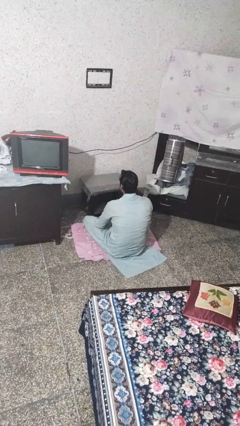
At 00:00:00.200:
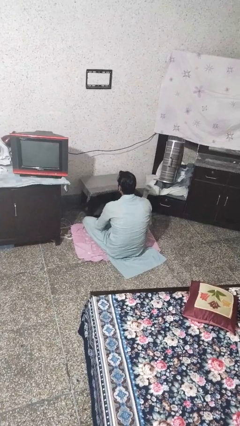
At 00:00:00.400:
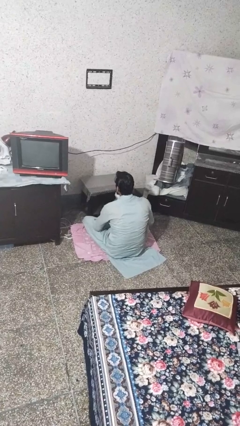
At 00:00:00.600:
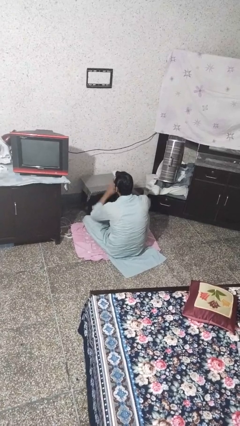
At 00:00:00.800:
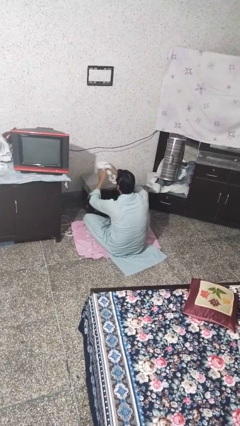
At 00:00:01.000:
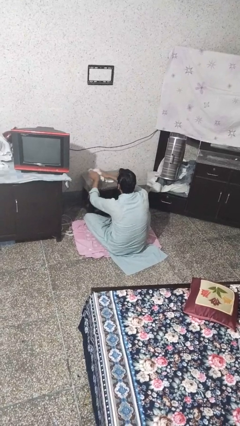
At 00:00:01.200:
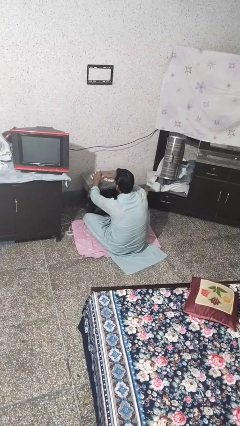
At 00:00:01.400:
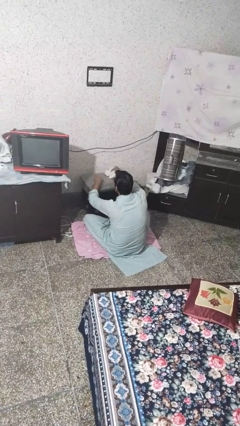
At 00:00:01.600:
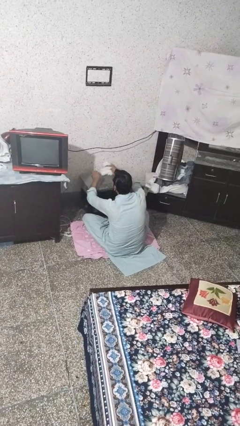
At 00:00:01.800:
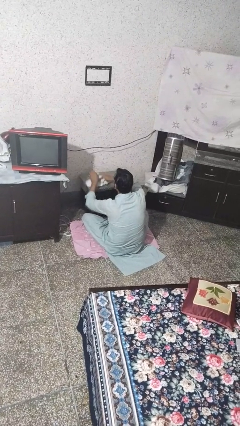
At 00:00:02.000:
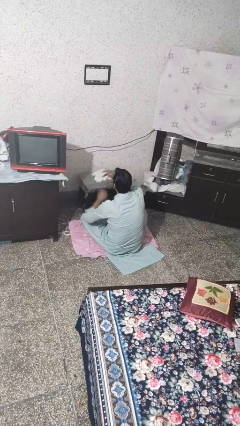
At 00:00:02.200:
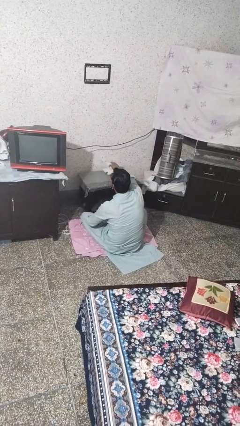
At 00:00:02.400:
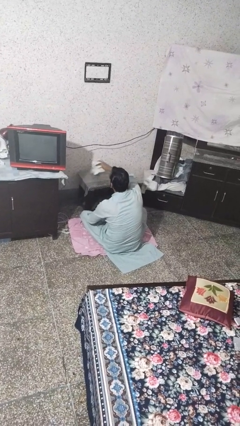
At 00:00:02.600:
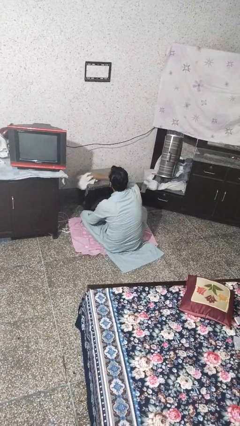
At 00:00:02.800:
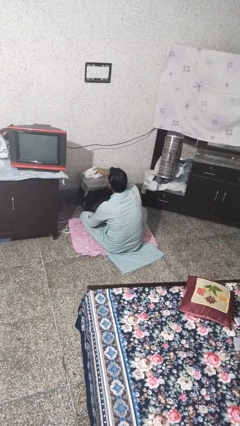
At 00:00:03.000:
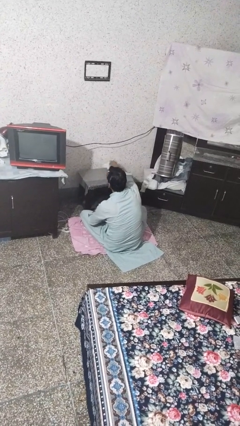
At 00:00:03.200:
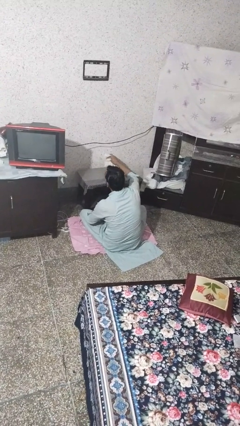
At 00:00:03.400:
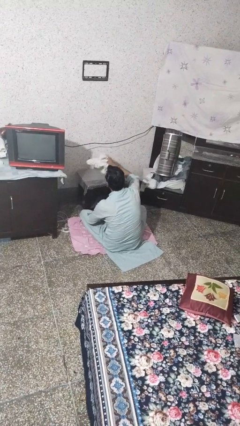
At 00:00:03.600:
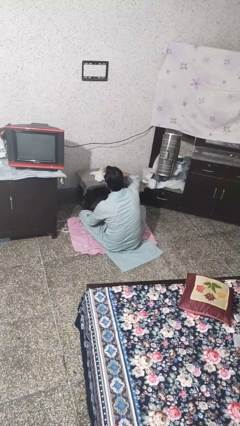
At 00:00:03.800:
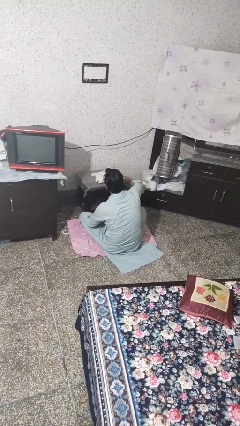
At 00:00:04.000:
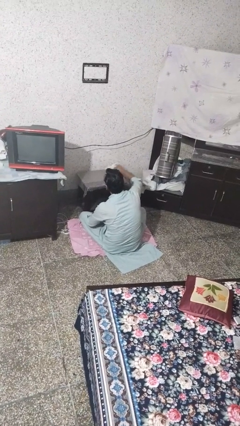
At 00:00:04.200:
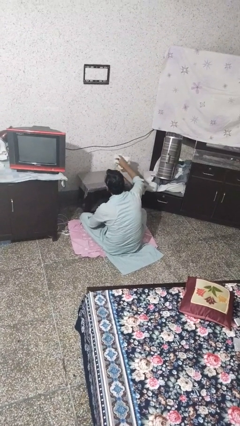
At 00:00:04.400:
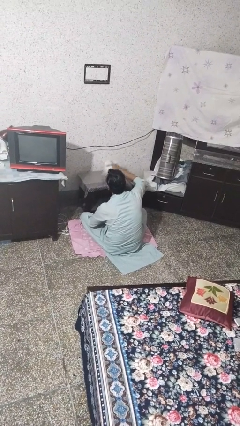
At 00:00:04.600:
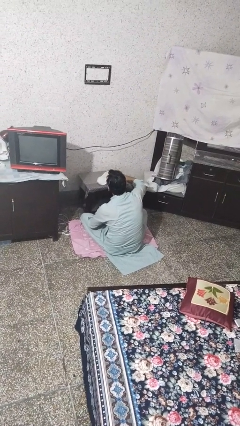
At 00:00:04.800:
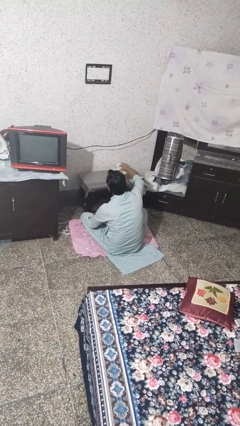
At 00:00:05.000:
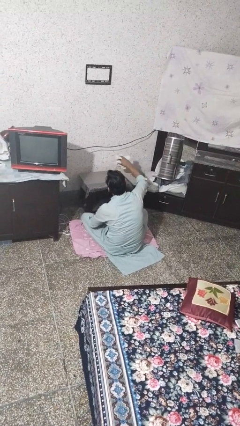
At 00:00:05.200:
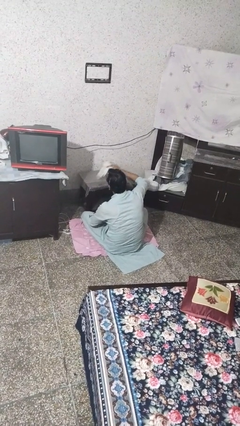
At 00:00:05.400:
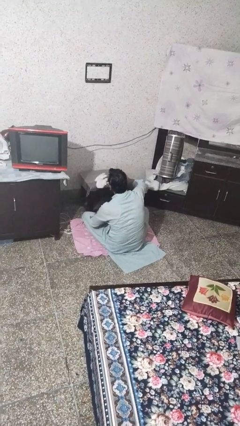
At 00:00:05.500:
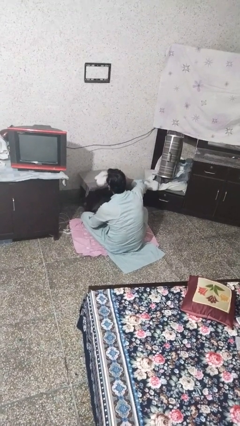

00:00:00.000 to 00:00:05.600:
person cleans table with rag

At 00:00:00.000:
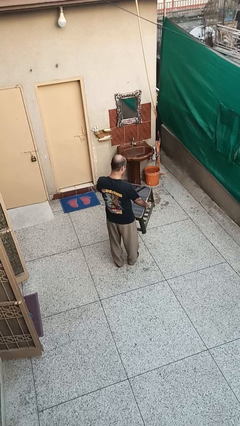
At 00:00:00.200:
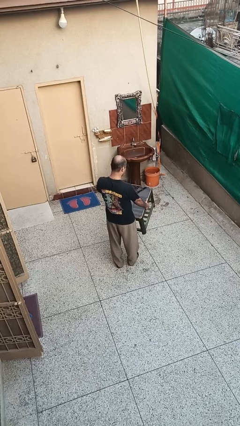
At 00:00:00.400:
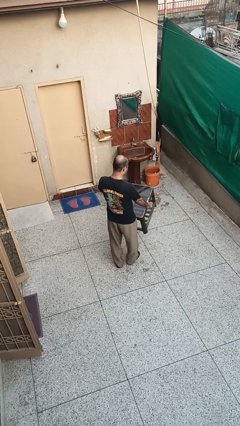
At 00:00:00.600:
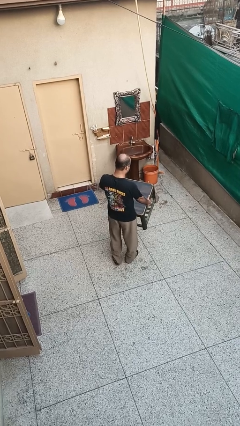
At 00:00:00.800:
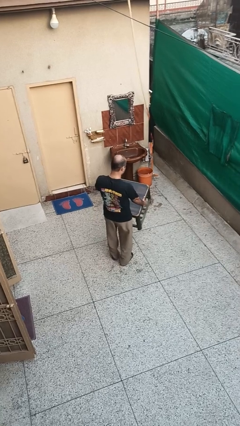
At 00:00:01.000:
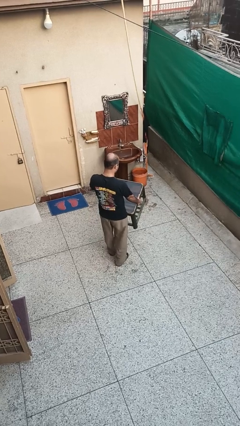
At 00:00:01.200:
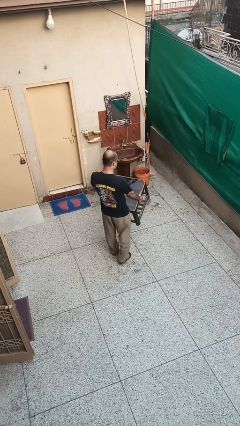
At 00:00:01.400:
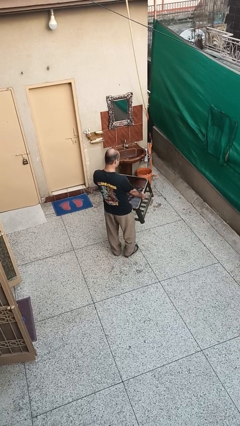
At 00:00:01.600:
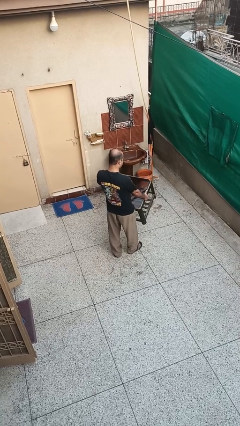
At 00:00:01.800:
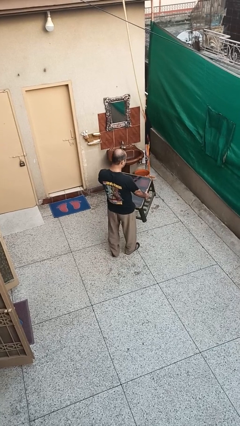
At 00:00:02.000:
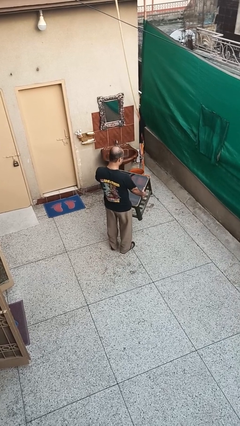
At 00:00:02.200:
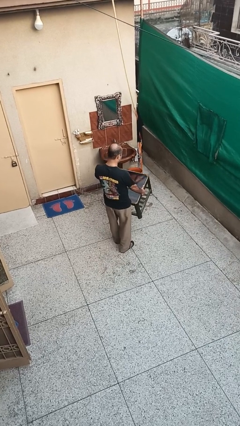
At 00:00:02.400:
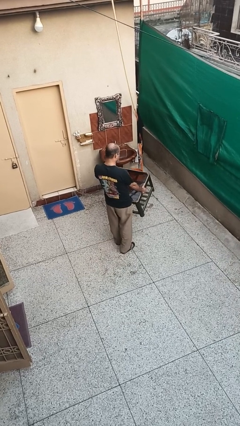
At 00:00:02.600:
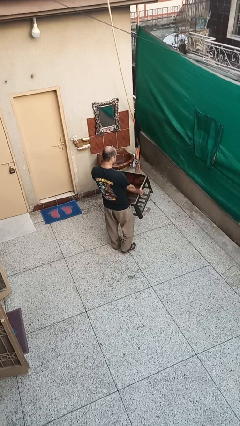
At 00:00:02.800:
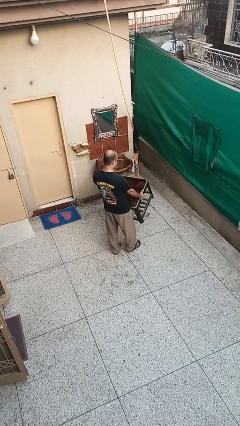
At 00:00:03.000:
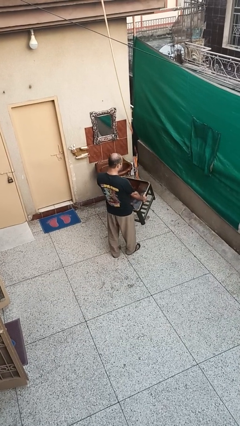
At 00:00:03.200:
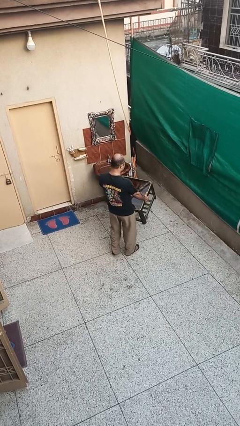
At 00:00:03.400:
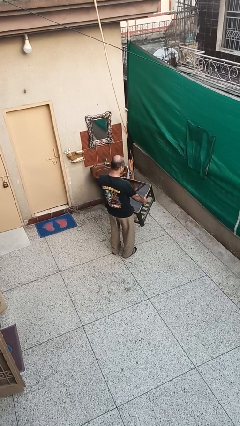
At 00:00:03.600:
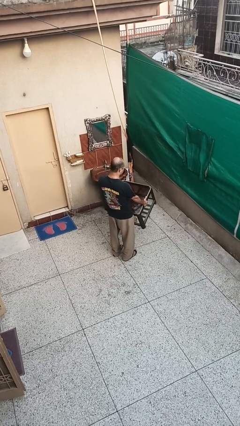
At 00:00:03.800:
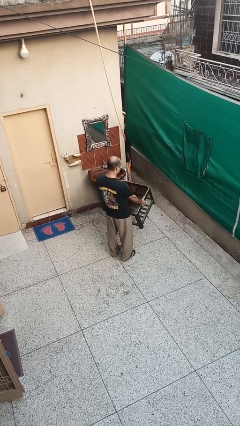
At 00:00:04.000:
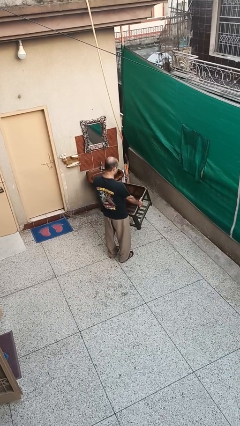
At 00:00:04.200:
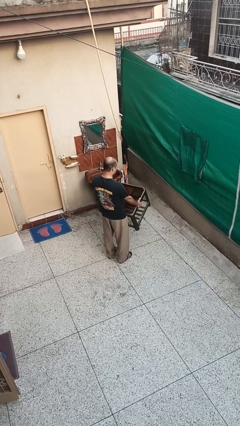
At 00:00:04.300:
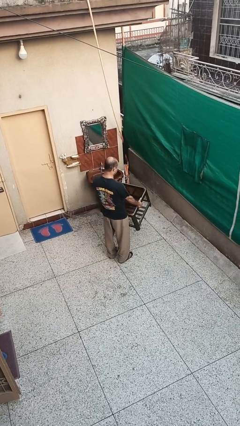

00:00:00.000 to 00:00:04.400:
person carries furniture

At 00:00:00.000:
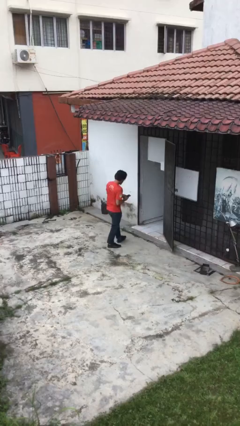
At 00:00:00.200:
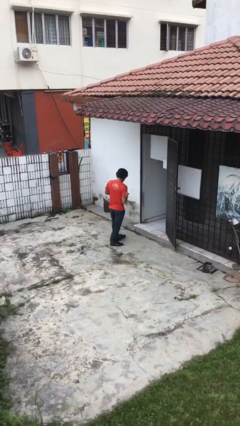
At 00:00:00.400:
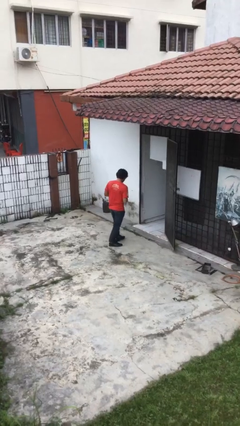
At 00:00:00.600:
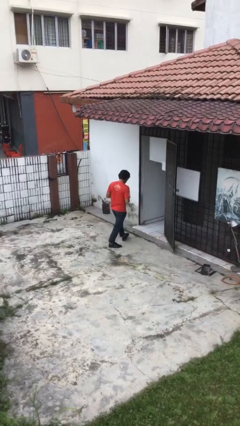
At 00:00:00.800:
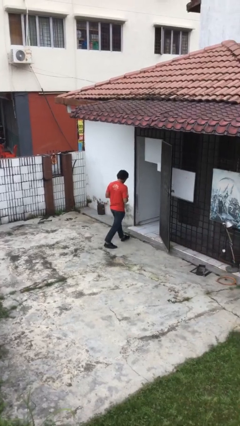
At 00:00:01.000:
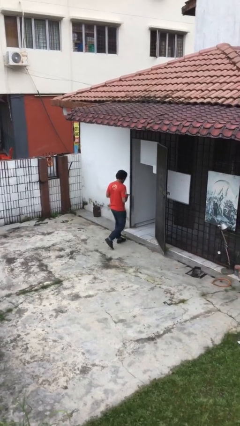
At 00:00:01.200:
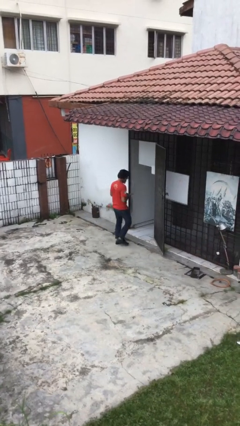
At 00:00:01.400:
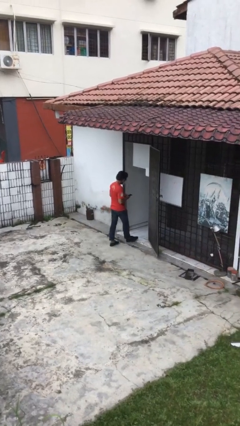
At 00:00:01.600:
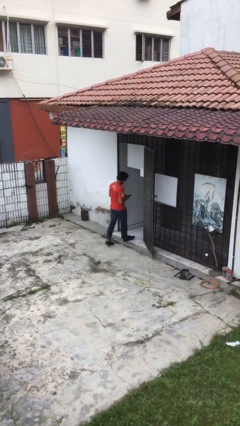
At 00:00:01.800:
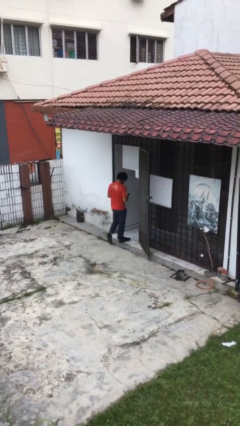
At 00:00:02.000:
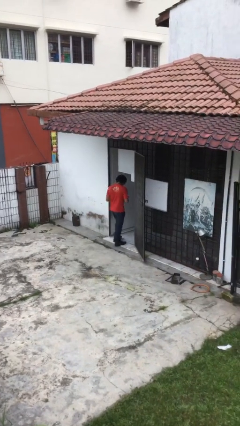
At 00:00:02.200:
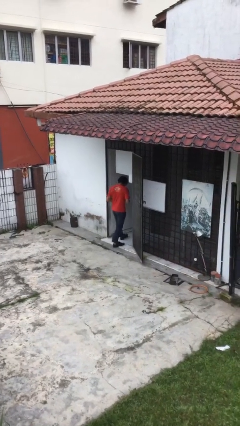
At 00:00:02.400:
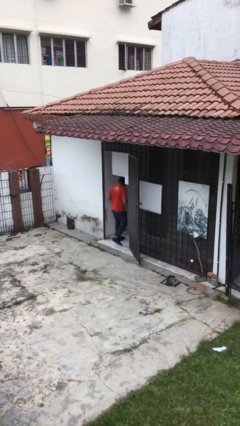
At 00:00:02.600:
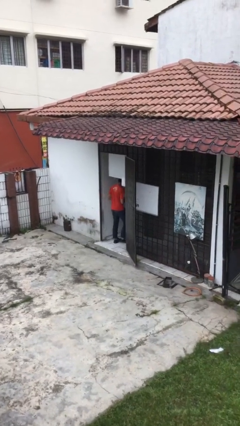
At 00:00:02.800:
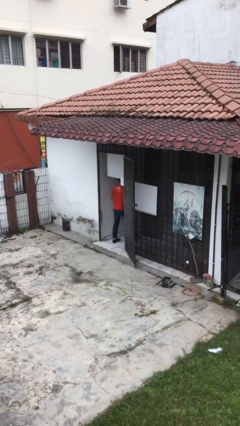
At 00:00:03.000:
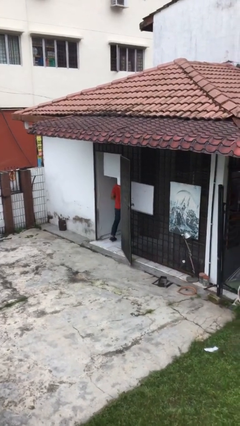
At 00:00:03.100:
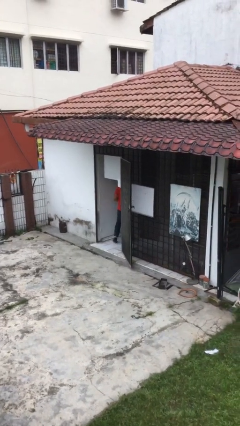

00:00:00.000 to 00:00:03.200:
person exits scene through structure

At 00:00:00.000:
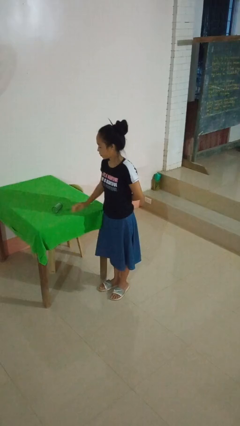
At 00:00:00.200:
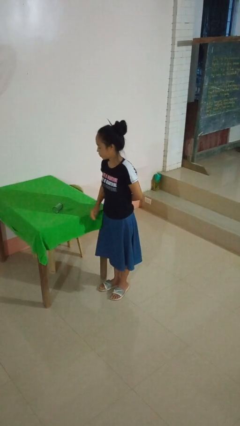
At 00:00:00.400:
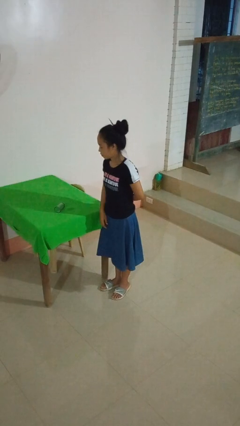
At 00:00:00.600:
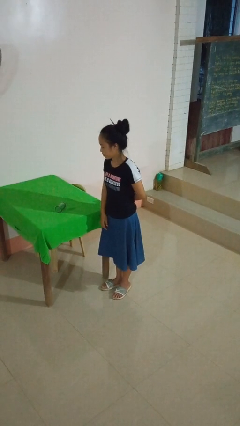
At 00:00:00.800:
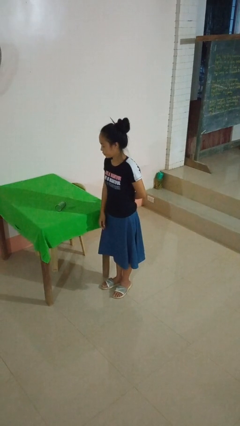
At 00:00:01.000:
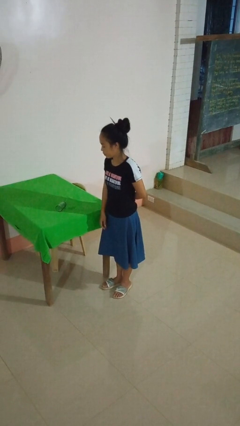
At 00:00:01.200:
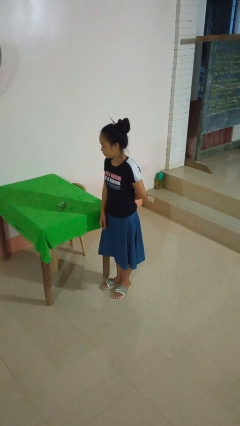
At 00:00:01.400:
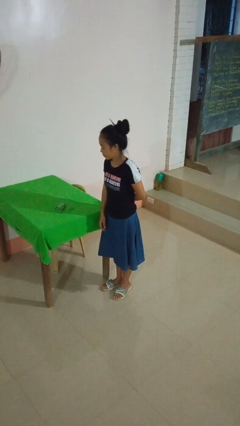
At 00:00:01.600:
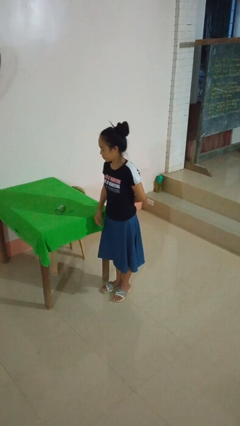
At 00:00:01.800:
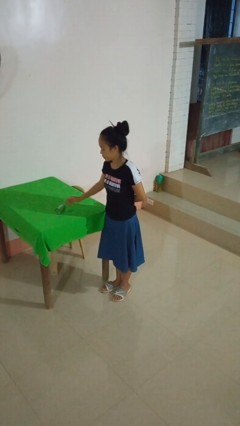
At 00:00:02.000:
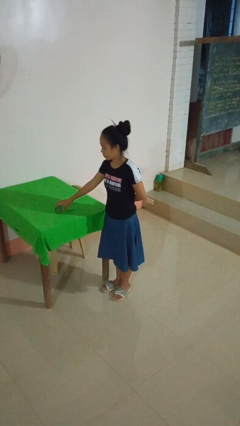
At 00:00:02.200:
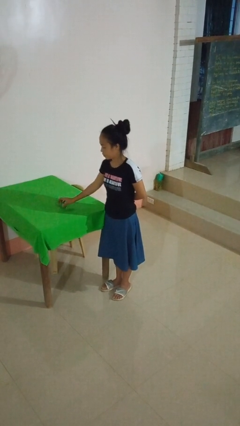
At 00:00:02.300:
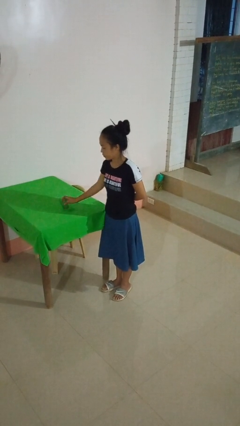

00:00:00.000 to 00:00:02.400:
person knocks over glass

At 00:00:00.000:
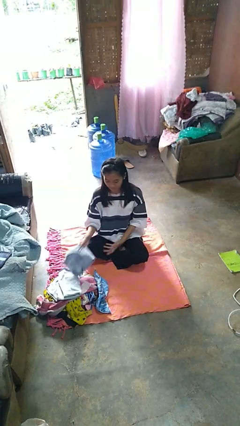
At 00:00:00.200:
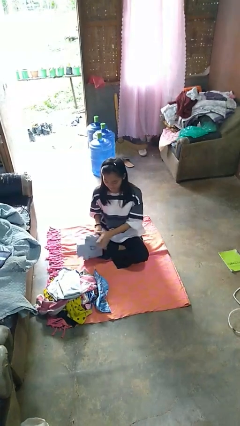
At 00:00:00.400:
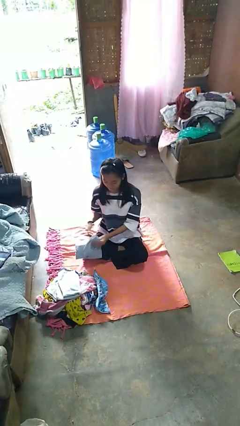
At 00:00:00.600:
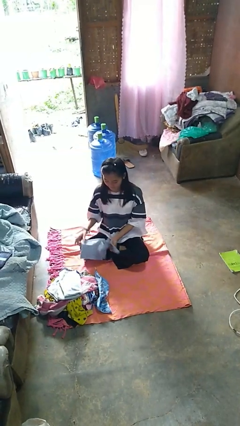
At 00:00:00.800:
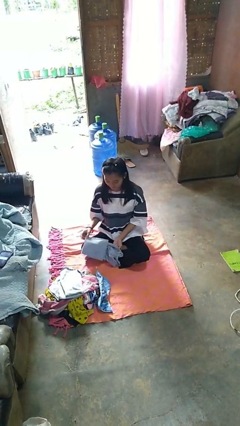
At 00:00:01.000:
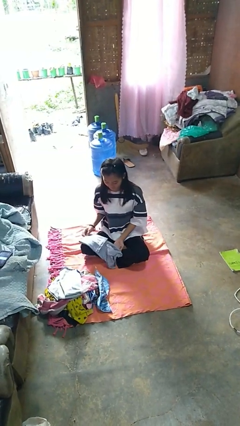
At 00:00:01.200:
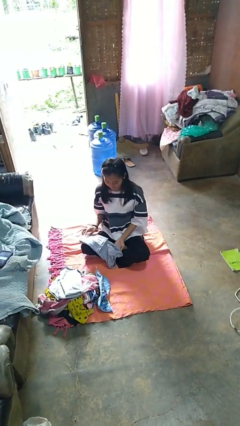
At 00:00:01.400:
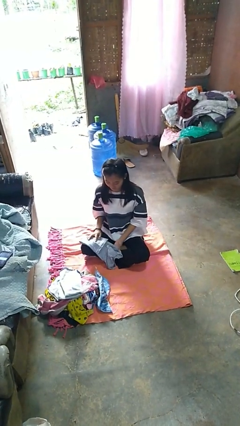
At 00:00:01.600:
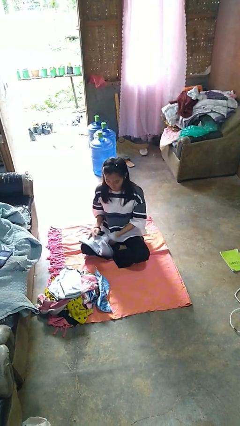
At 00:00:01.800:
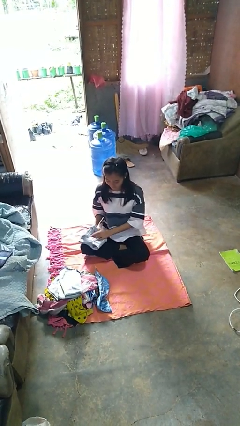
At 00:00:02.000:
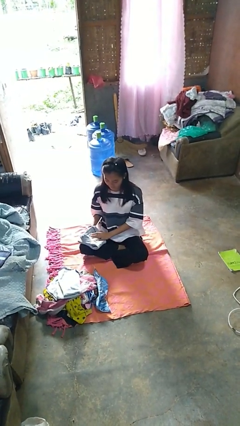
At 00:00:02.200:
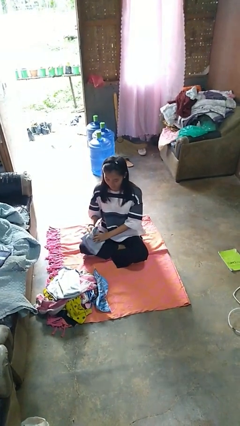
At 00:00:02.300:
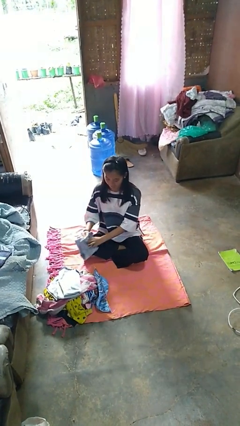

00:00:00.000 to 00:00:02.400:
person folds shirt
